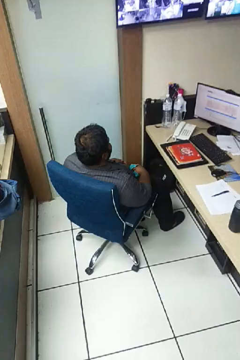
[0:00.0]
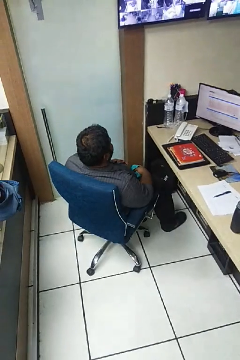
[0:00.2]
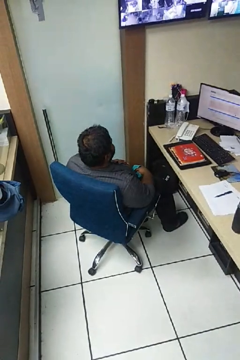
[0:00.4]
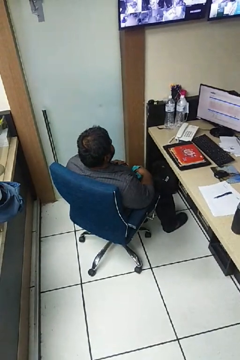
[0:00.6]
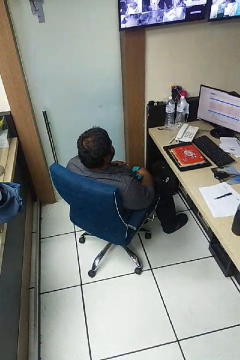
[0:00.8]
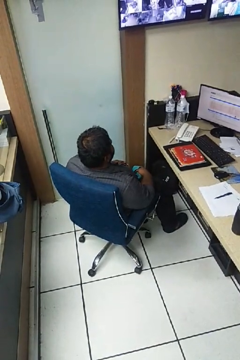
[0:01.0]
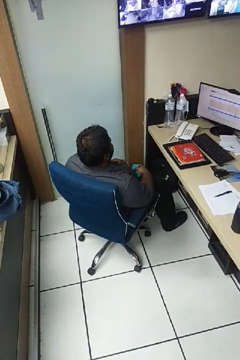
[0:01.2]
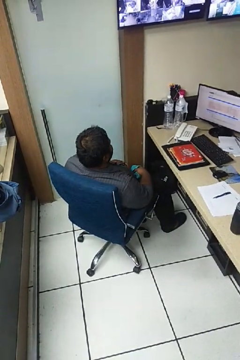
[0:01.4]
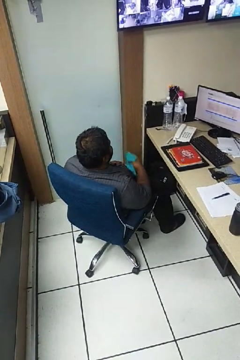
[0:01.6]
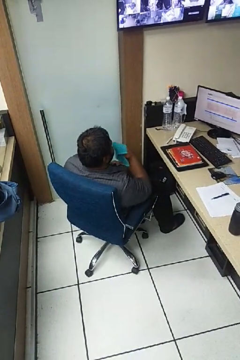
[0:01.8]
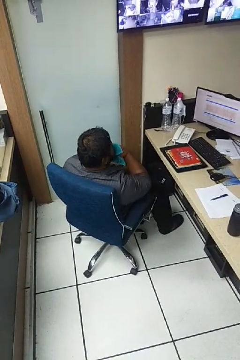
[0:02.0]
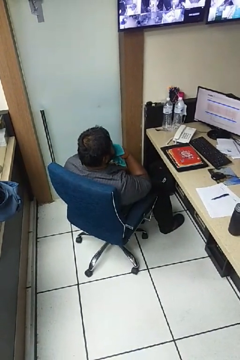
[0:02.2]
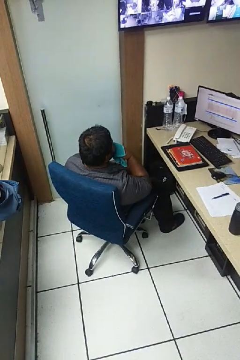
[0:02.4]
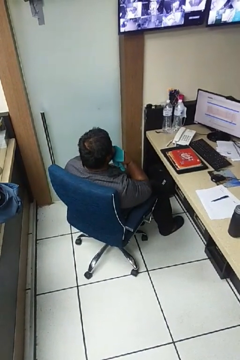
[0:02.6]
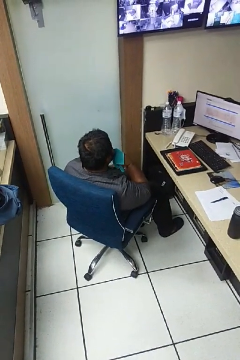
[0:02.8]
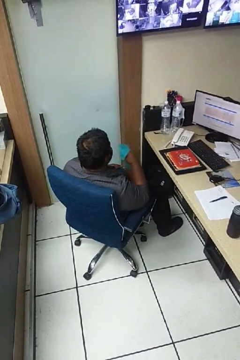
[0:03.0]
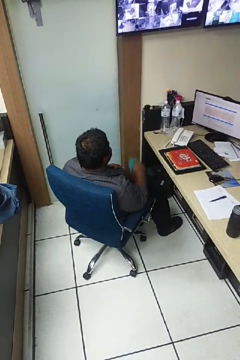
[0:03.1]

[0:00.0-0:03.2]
person wipes mouth with napkin

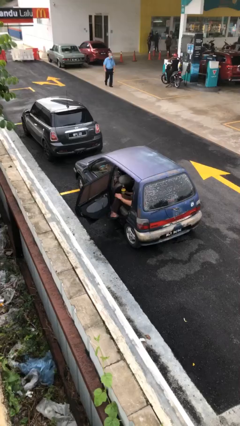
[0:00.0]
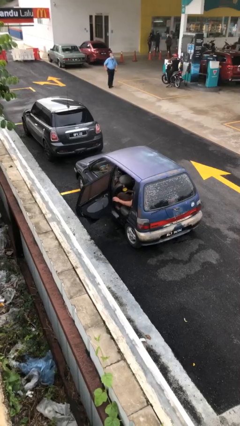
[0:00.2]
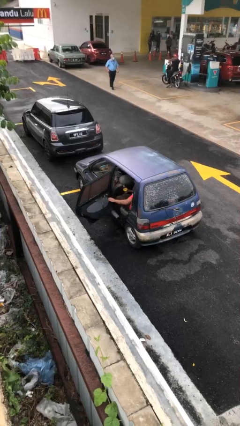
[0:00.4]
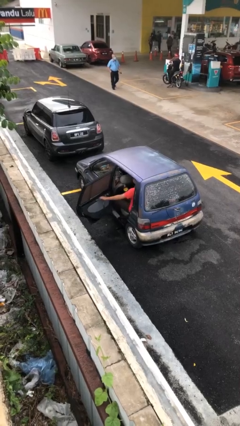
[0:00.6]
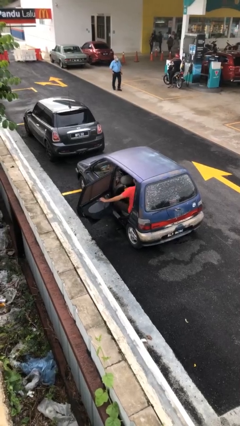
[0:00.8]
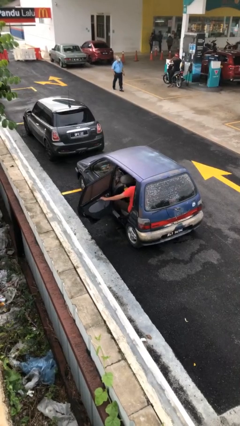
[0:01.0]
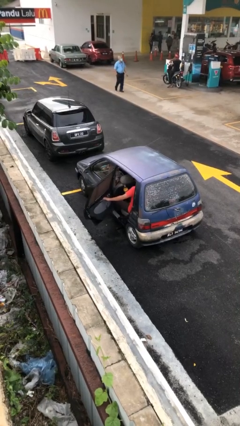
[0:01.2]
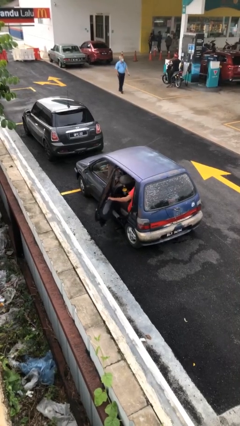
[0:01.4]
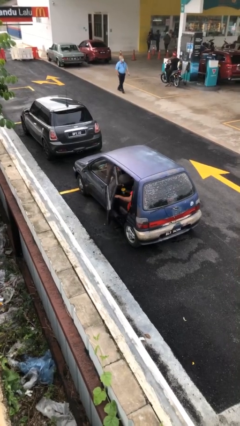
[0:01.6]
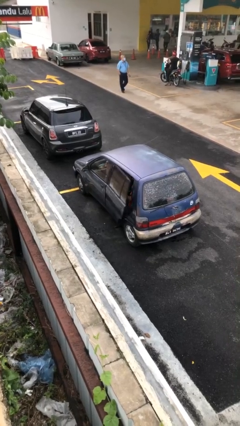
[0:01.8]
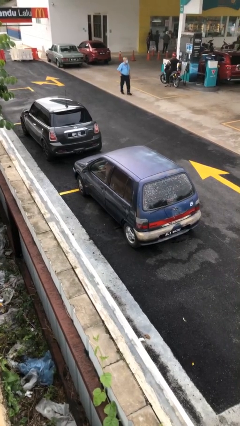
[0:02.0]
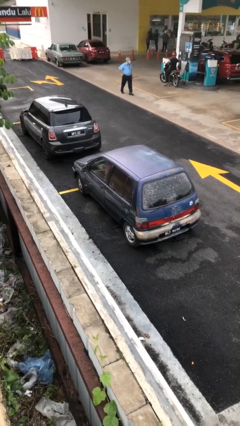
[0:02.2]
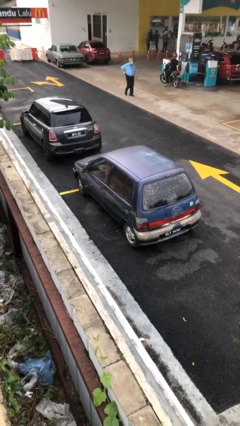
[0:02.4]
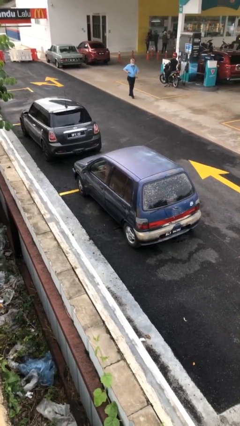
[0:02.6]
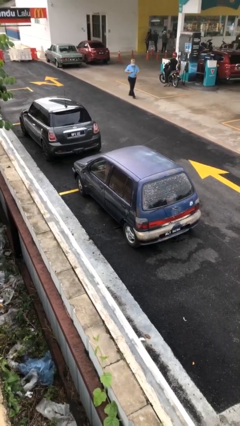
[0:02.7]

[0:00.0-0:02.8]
person closes car door

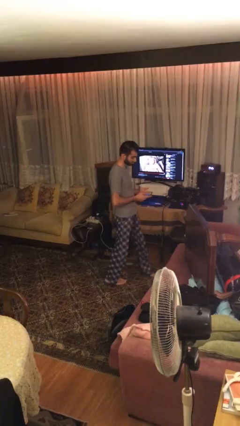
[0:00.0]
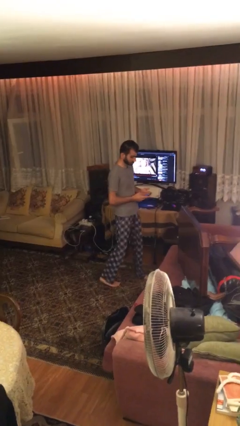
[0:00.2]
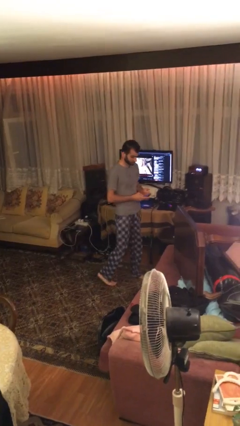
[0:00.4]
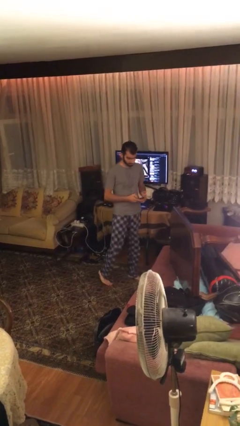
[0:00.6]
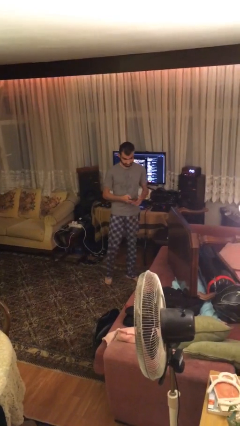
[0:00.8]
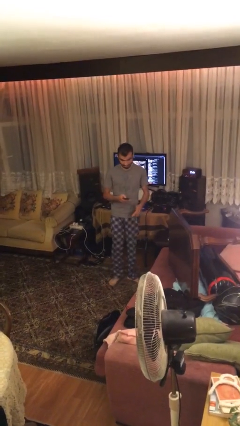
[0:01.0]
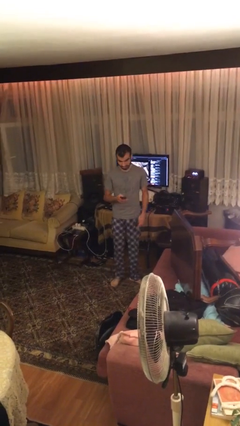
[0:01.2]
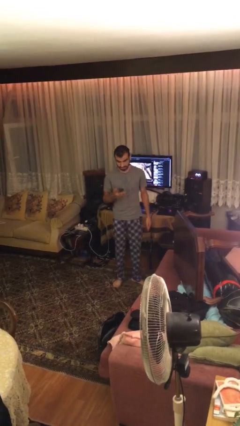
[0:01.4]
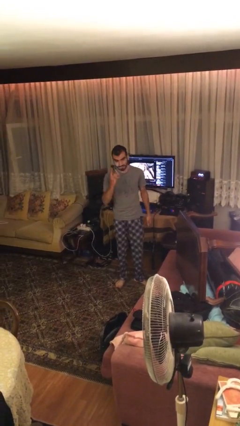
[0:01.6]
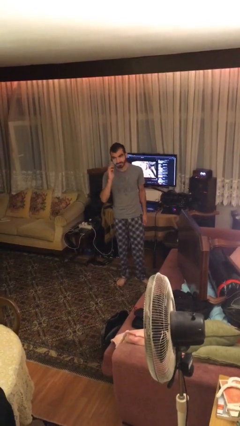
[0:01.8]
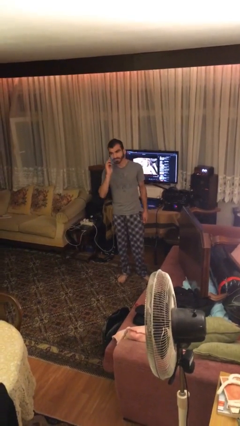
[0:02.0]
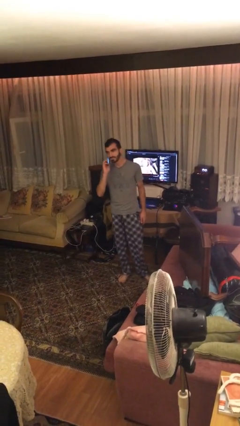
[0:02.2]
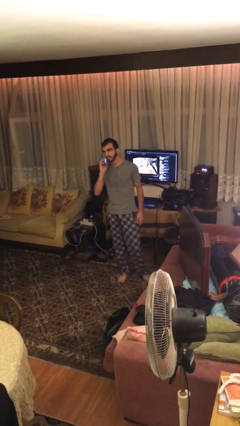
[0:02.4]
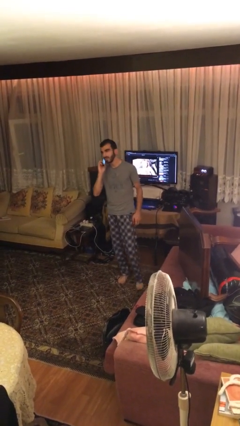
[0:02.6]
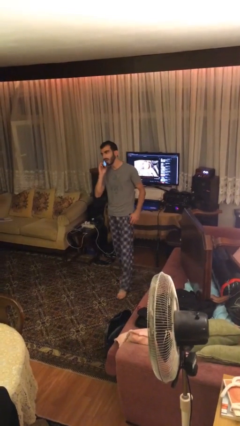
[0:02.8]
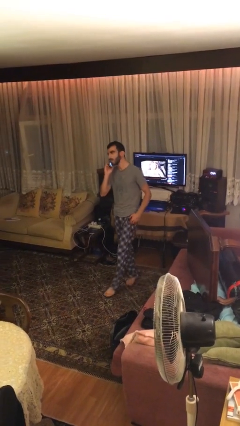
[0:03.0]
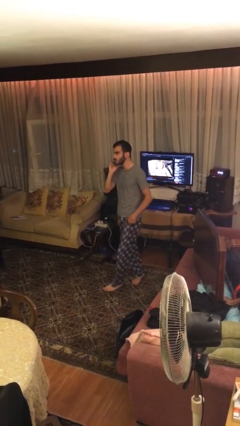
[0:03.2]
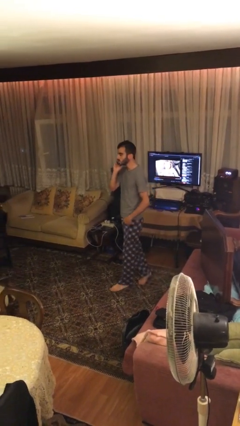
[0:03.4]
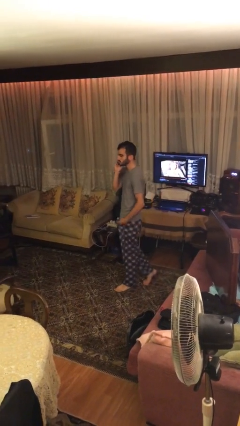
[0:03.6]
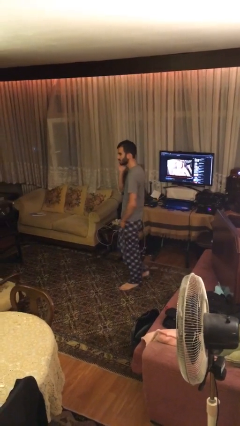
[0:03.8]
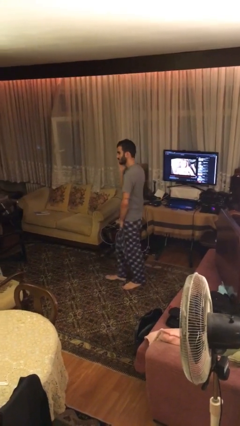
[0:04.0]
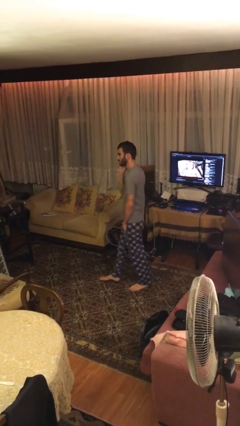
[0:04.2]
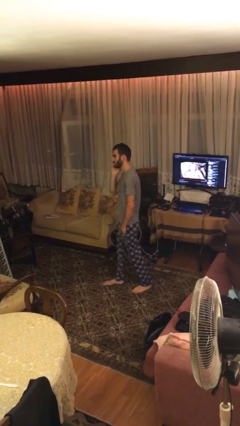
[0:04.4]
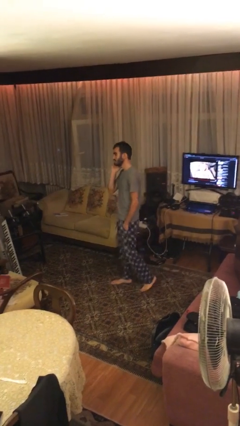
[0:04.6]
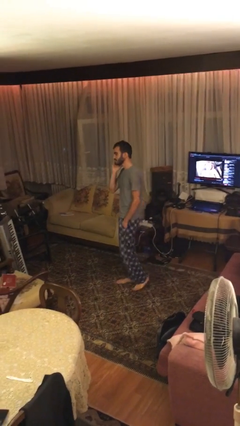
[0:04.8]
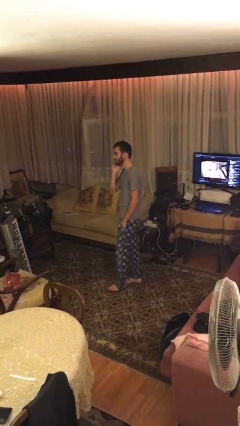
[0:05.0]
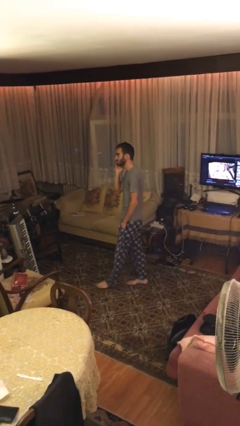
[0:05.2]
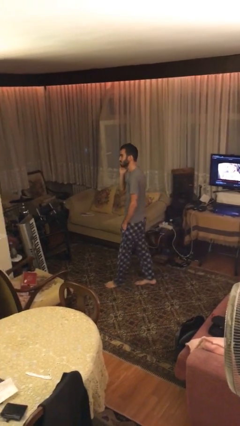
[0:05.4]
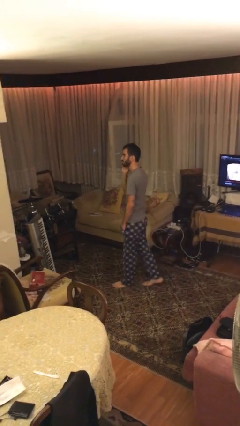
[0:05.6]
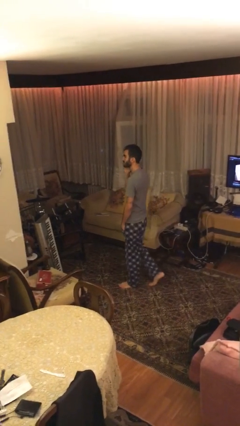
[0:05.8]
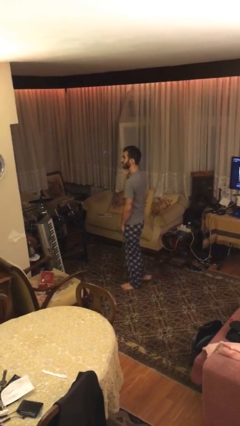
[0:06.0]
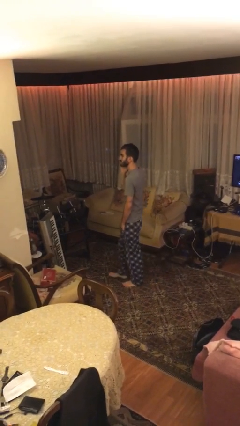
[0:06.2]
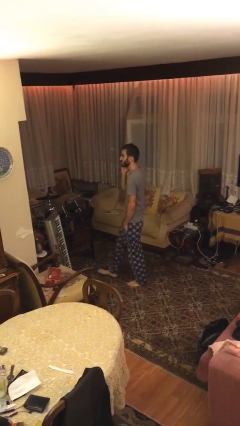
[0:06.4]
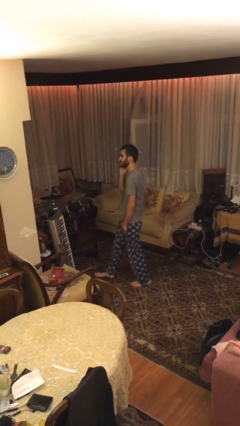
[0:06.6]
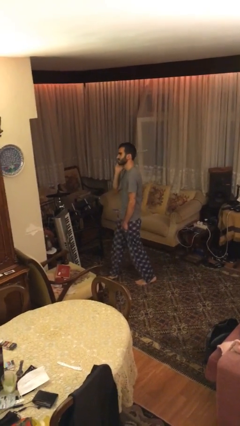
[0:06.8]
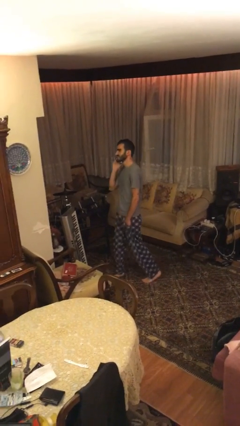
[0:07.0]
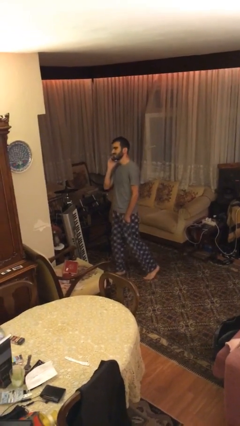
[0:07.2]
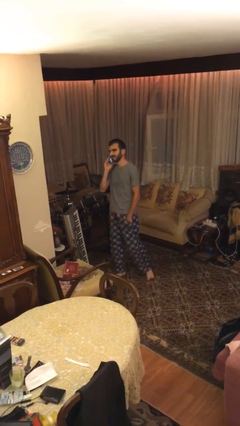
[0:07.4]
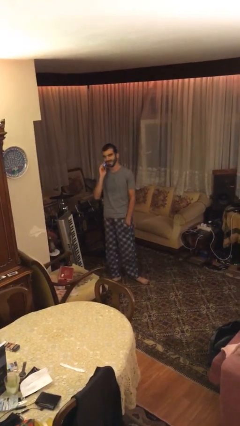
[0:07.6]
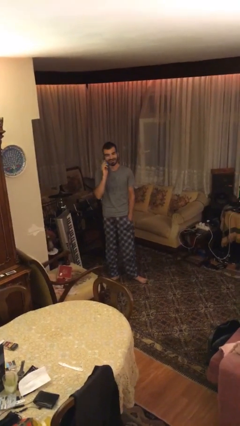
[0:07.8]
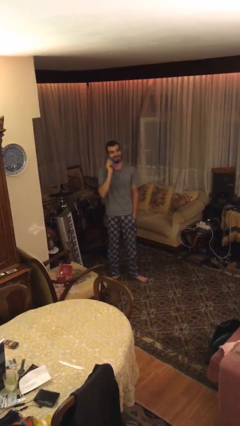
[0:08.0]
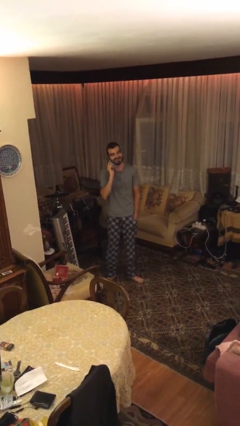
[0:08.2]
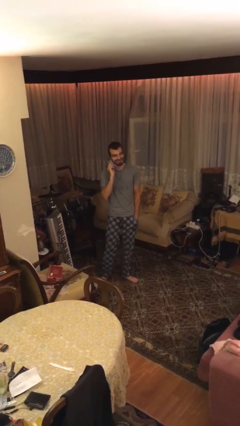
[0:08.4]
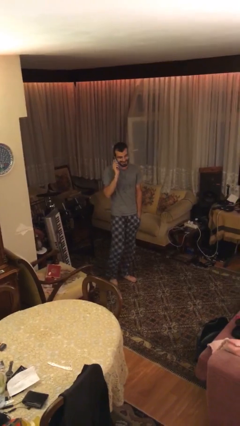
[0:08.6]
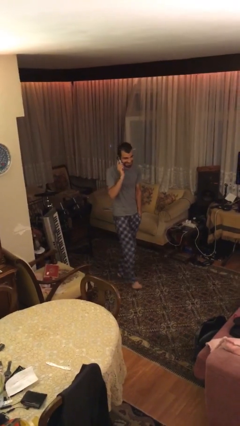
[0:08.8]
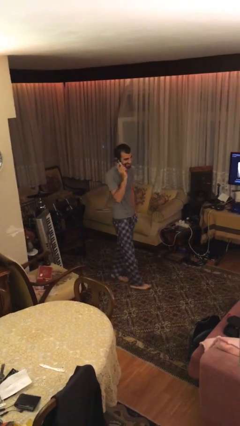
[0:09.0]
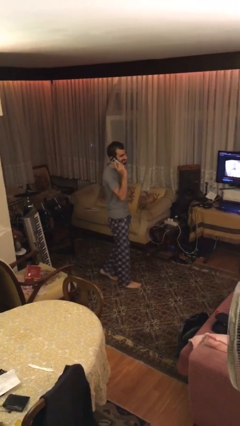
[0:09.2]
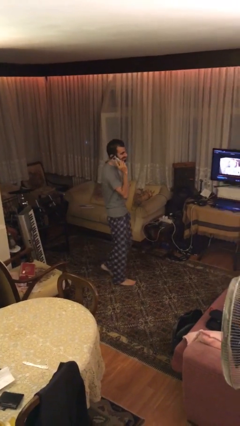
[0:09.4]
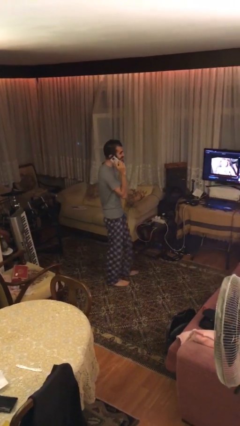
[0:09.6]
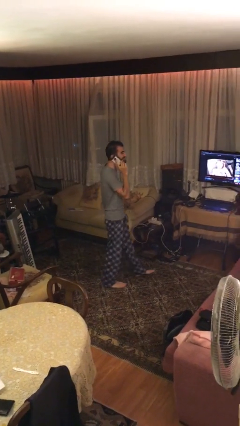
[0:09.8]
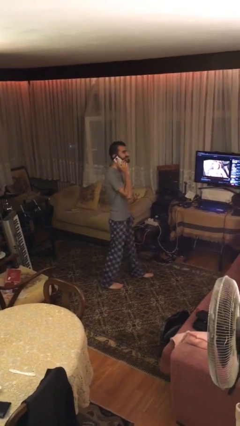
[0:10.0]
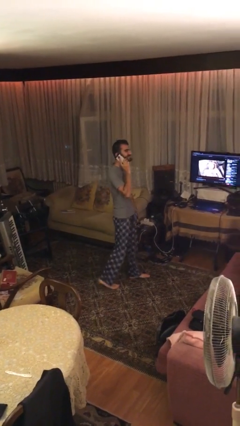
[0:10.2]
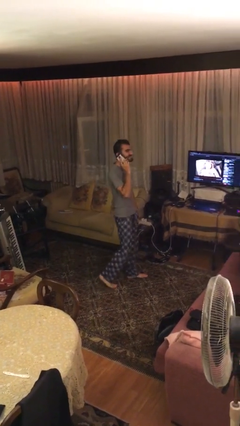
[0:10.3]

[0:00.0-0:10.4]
person talks on phone

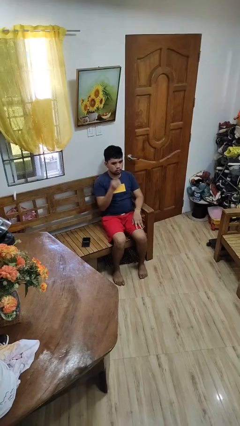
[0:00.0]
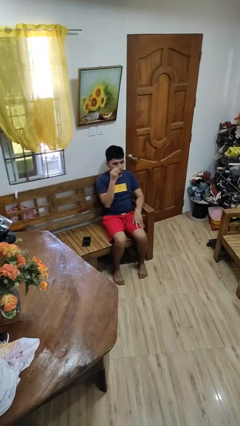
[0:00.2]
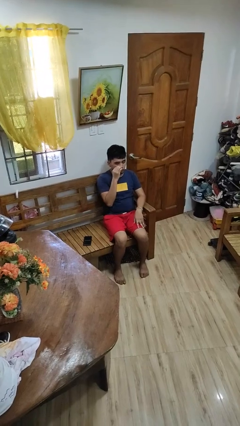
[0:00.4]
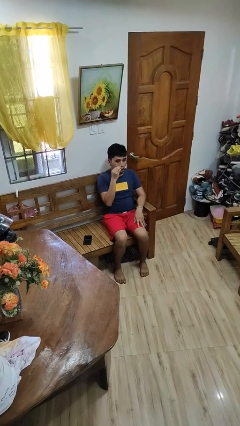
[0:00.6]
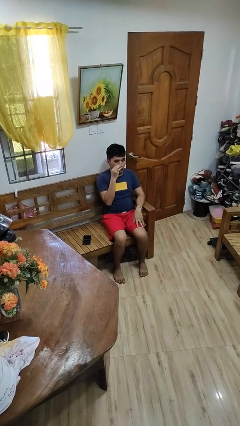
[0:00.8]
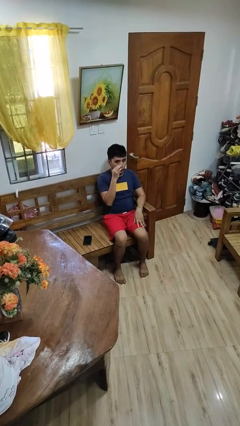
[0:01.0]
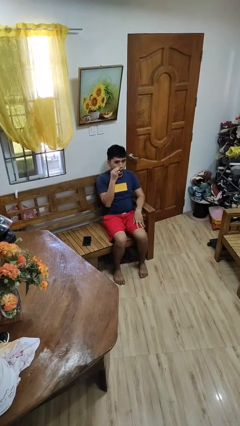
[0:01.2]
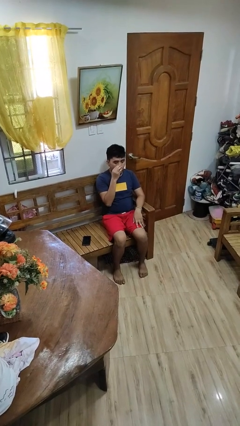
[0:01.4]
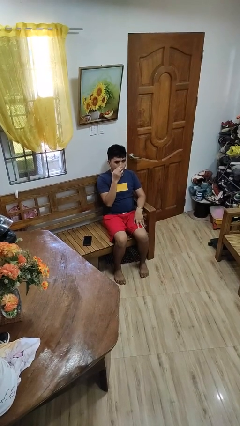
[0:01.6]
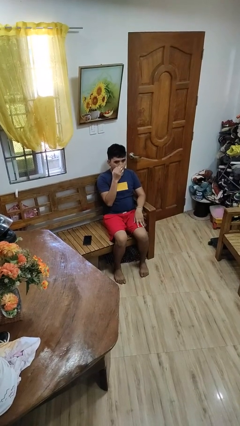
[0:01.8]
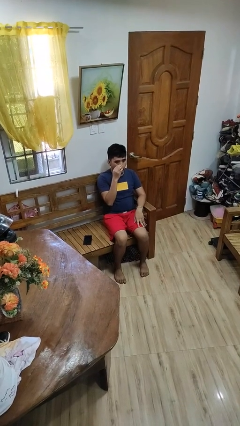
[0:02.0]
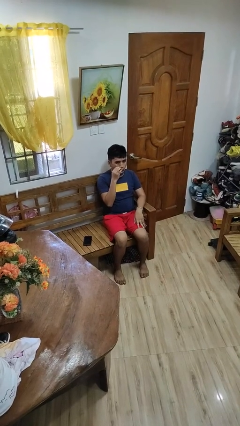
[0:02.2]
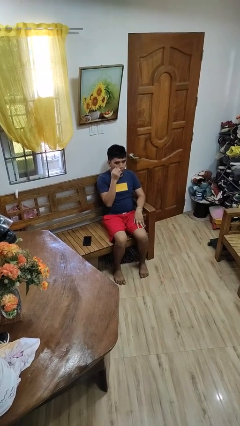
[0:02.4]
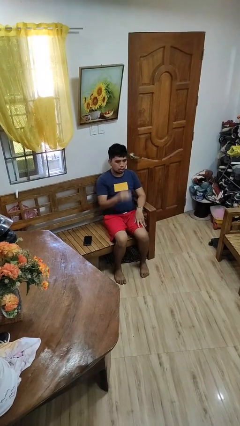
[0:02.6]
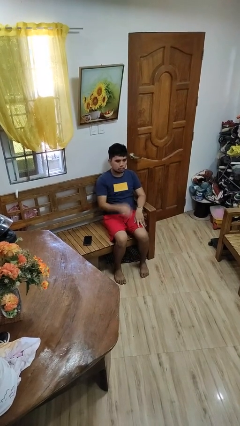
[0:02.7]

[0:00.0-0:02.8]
person scratches face
